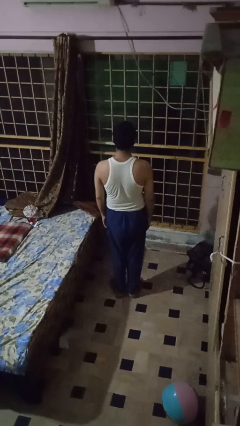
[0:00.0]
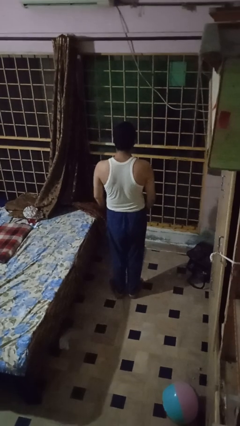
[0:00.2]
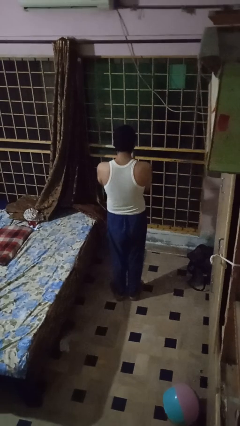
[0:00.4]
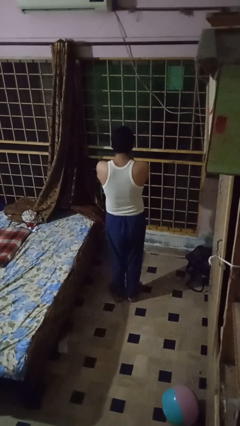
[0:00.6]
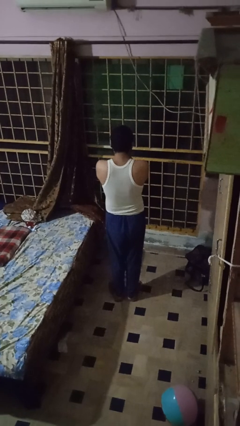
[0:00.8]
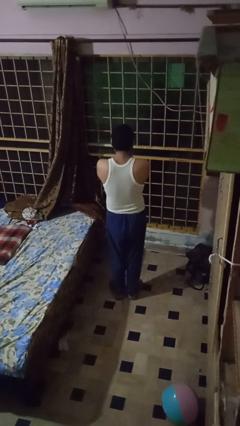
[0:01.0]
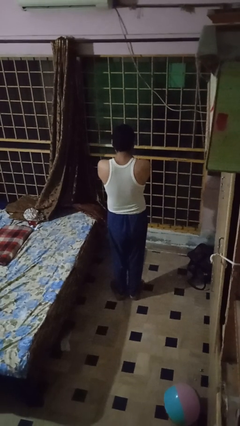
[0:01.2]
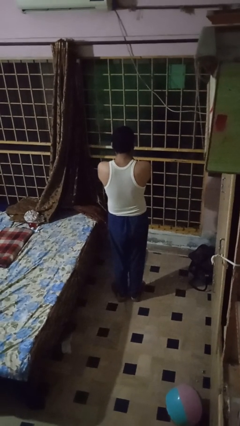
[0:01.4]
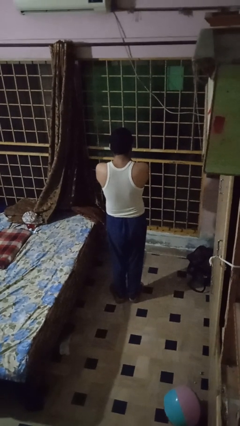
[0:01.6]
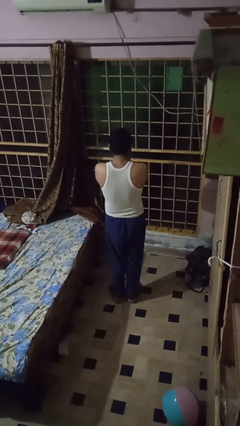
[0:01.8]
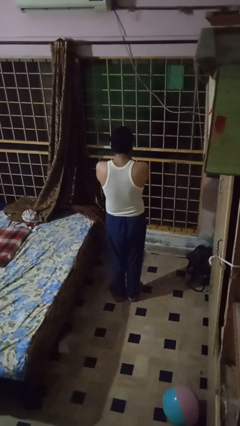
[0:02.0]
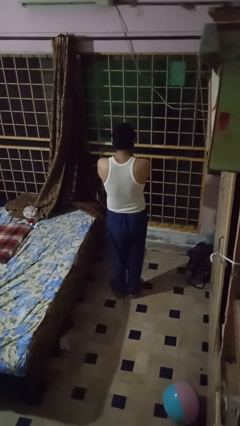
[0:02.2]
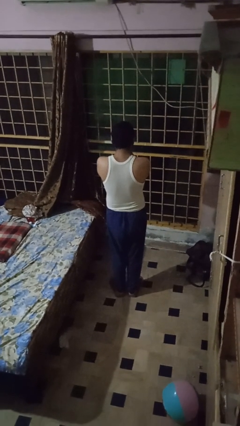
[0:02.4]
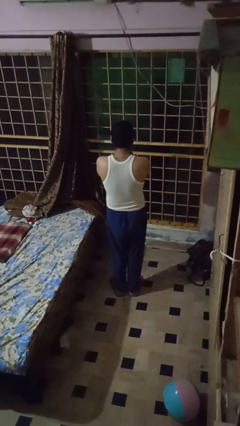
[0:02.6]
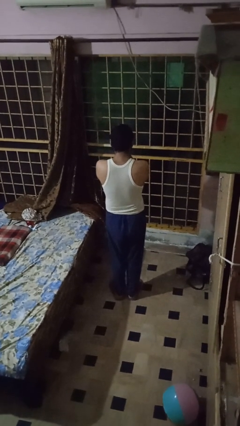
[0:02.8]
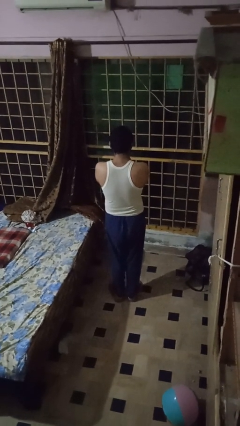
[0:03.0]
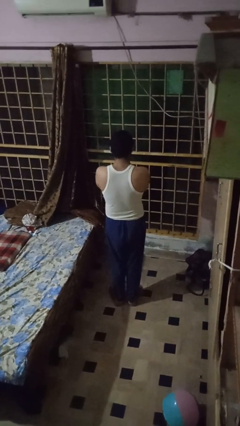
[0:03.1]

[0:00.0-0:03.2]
person covers face with hands

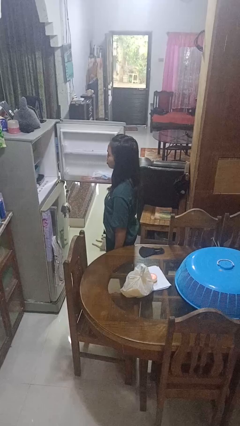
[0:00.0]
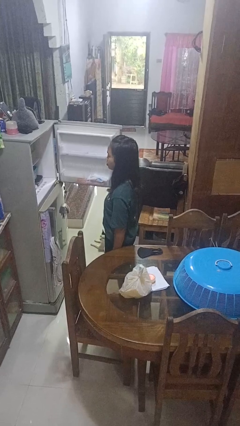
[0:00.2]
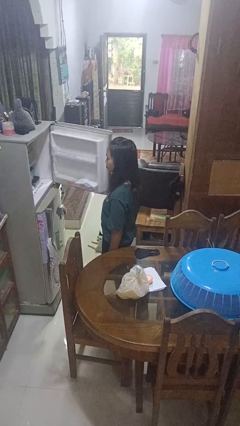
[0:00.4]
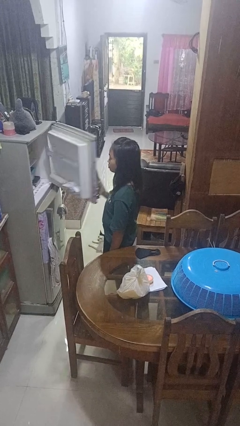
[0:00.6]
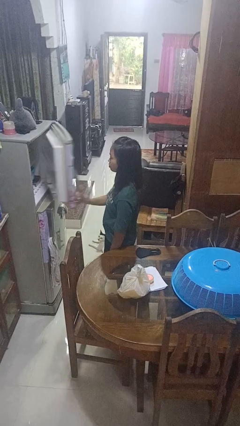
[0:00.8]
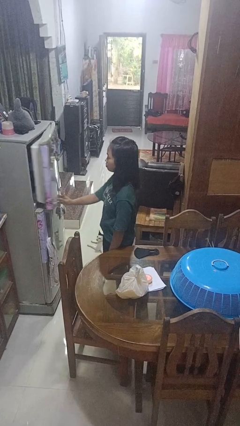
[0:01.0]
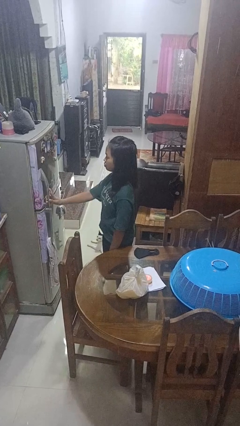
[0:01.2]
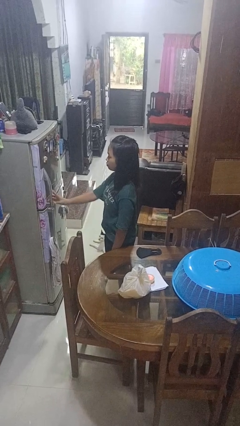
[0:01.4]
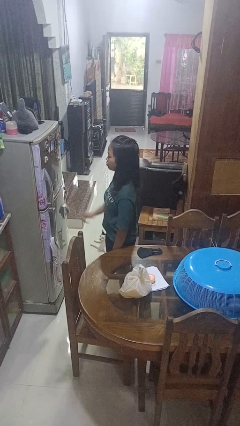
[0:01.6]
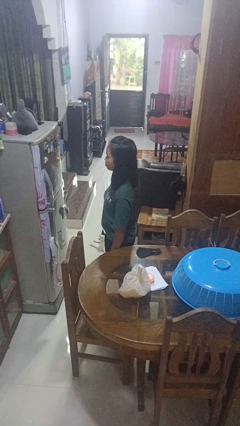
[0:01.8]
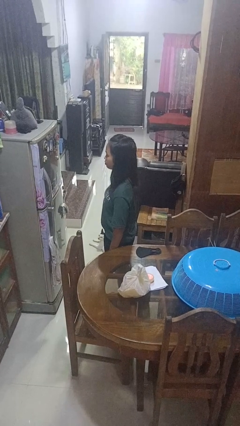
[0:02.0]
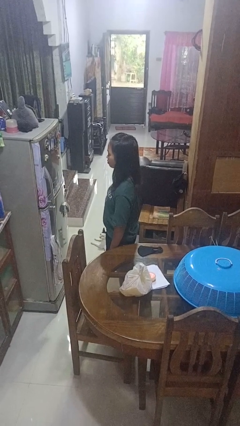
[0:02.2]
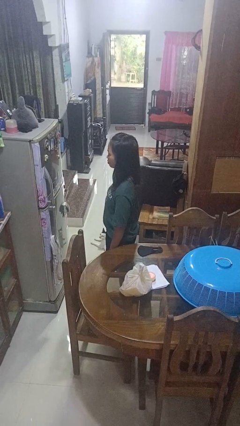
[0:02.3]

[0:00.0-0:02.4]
person closes refrigerator

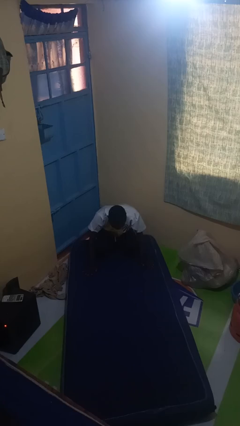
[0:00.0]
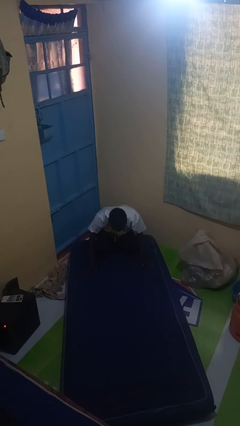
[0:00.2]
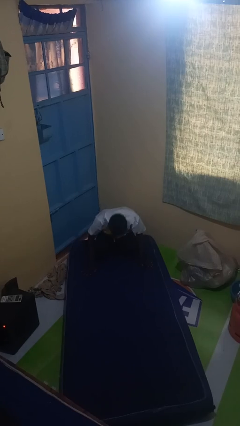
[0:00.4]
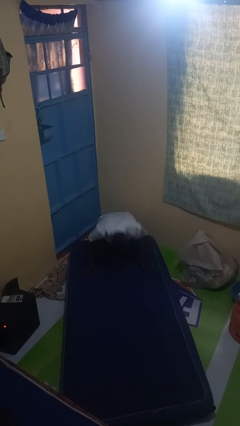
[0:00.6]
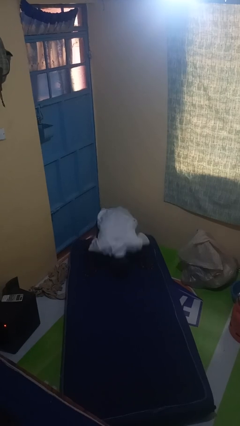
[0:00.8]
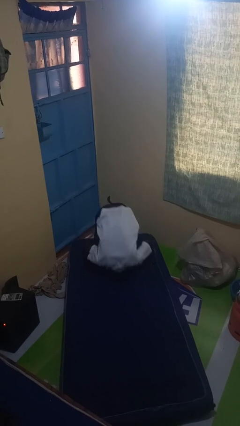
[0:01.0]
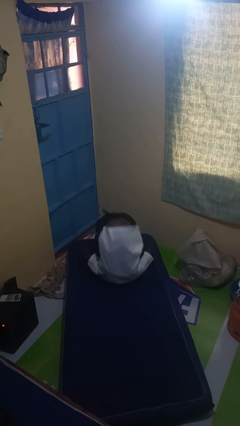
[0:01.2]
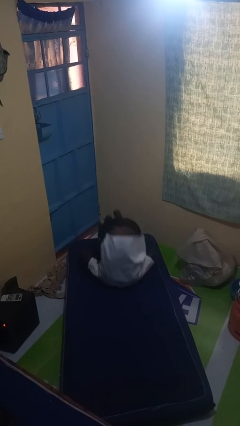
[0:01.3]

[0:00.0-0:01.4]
person somersaults

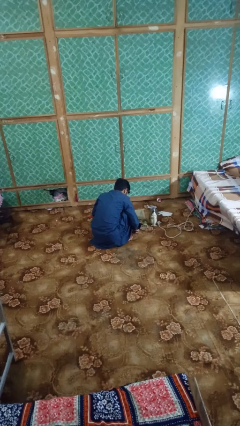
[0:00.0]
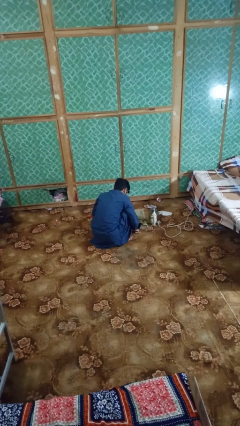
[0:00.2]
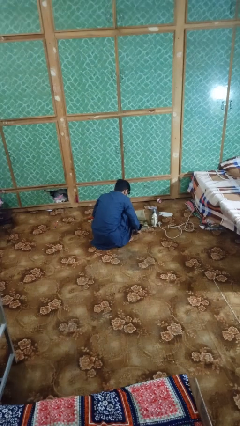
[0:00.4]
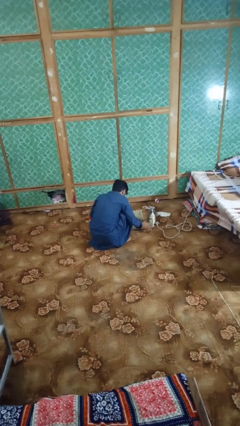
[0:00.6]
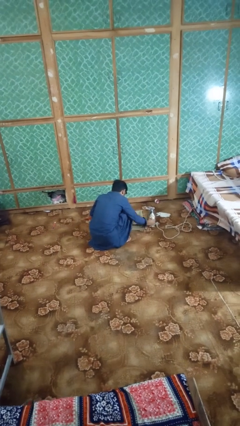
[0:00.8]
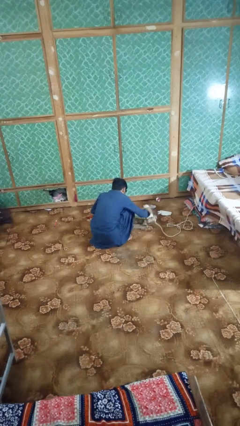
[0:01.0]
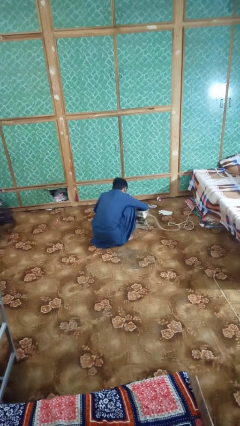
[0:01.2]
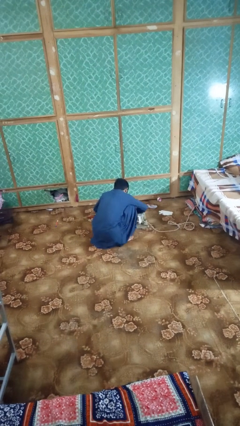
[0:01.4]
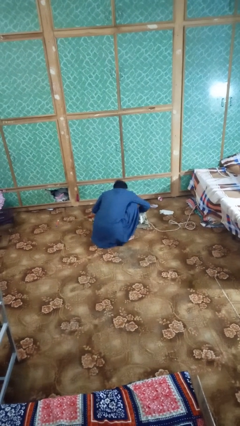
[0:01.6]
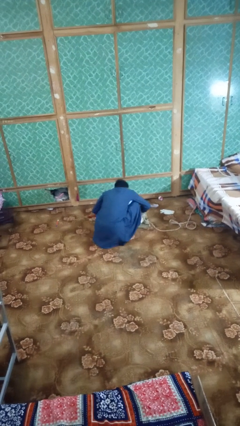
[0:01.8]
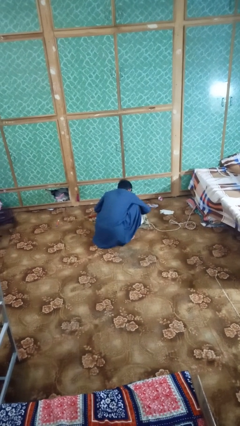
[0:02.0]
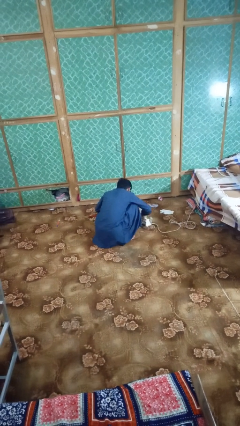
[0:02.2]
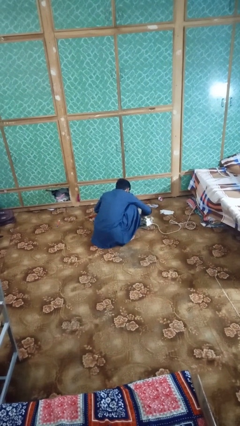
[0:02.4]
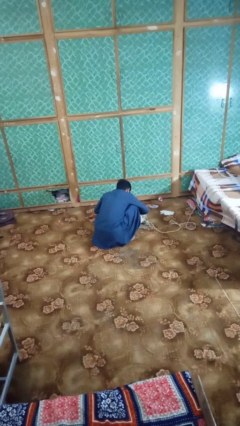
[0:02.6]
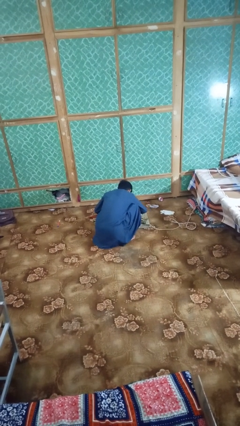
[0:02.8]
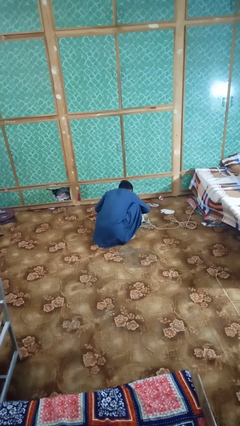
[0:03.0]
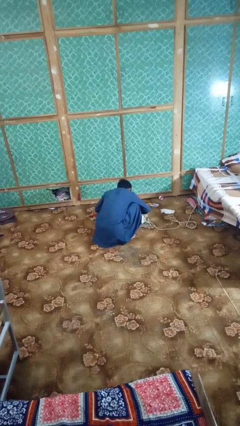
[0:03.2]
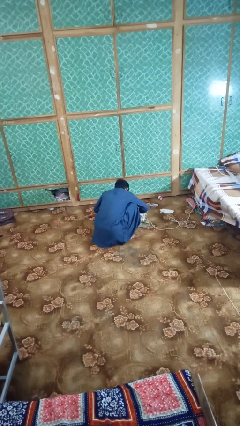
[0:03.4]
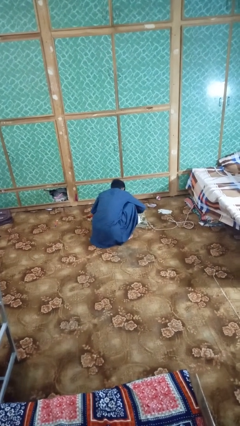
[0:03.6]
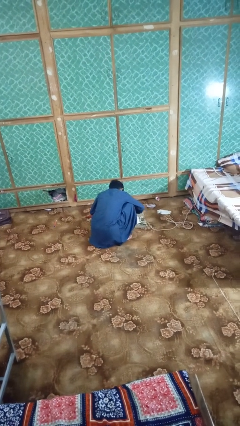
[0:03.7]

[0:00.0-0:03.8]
person irons clothes

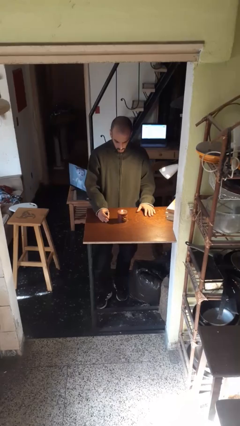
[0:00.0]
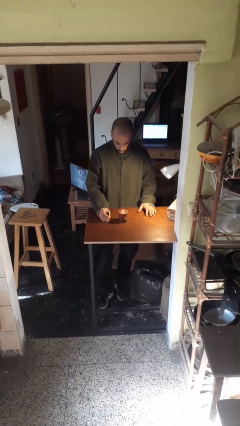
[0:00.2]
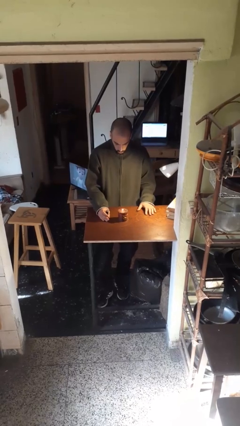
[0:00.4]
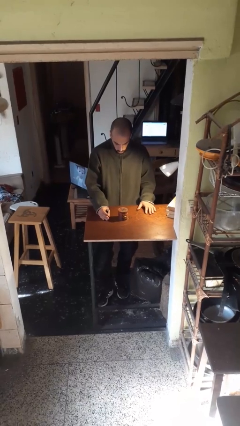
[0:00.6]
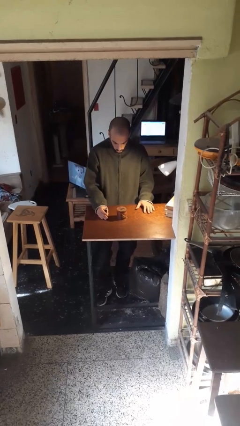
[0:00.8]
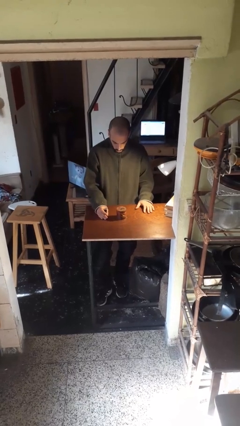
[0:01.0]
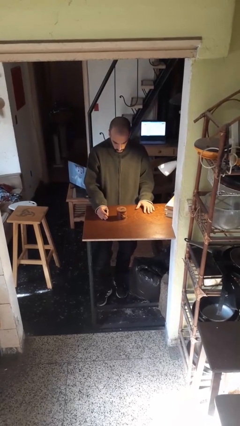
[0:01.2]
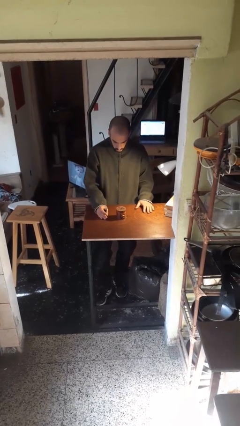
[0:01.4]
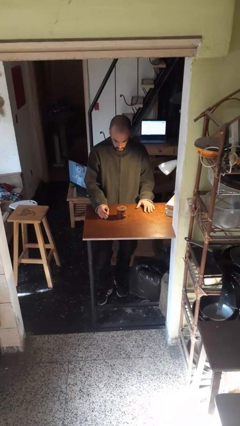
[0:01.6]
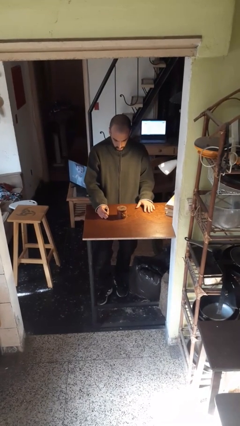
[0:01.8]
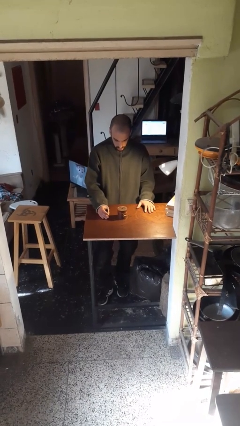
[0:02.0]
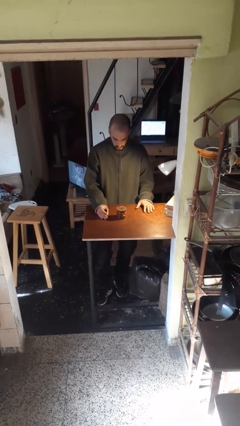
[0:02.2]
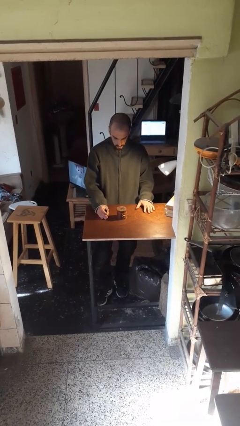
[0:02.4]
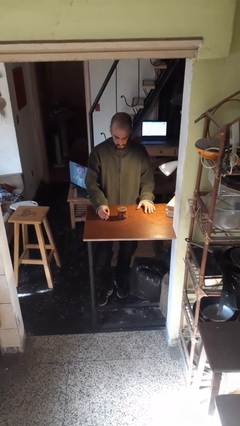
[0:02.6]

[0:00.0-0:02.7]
person extinguishes candle

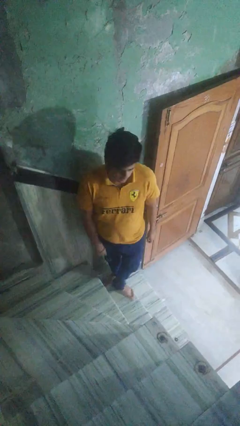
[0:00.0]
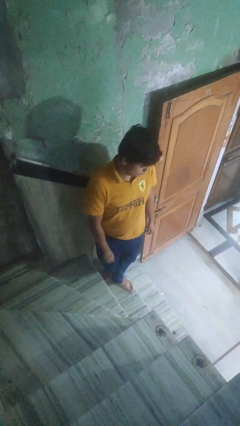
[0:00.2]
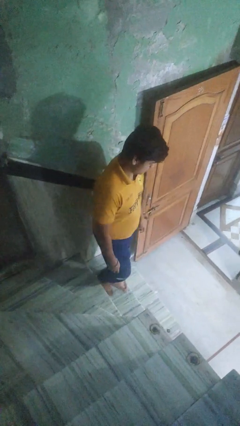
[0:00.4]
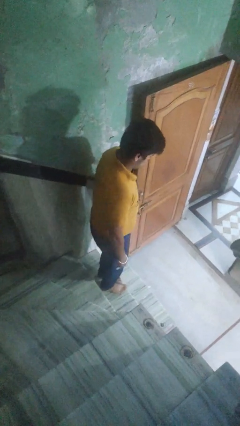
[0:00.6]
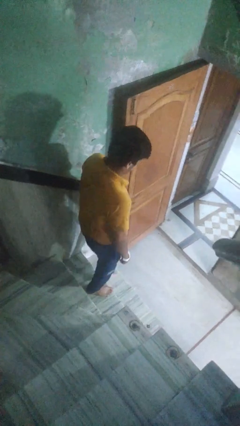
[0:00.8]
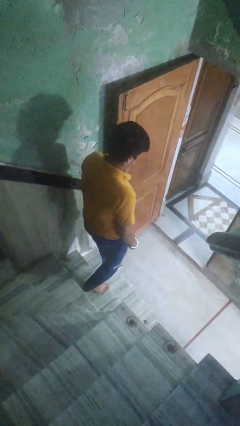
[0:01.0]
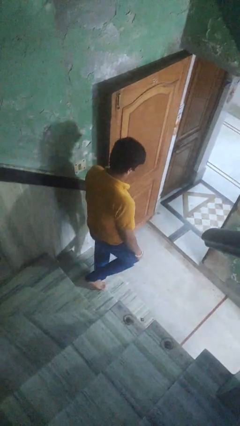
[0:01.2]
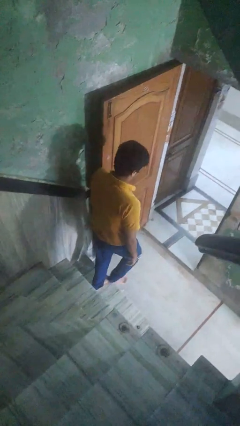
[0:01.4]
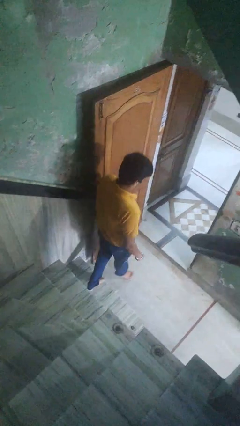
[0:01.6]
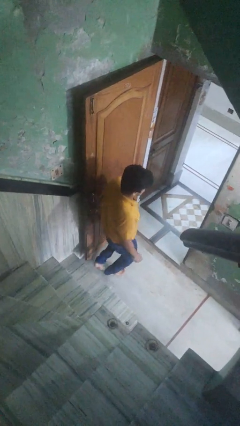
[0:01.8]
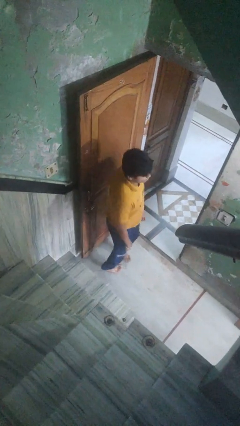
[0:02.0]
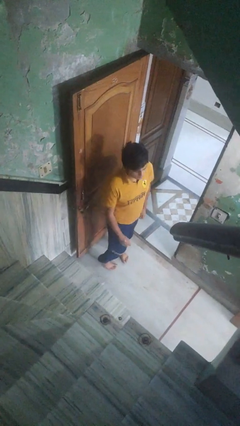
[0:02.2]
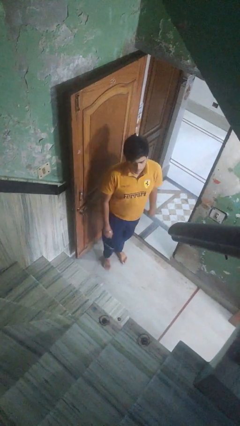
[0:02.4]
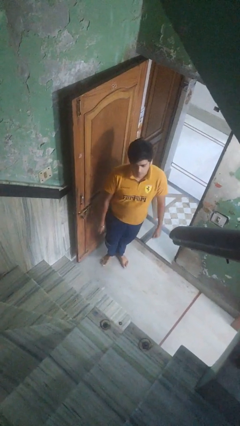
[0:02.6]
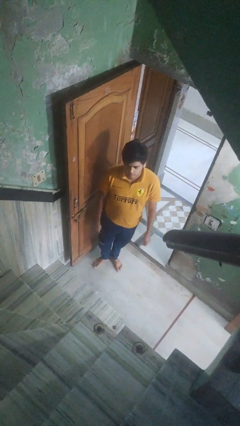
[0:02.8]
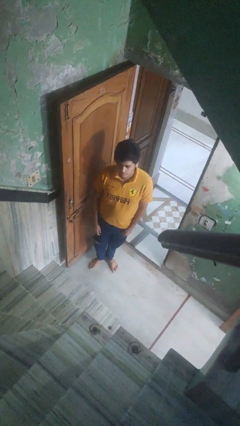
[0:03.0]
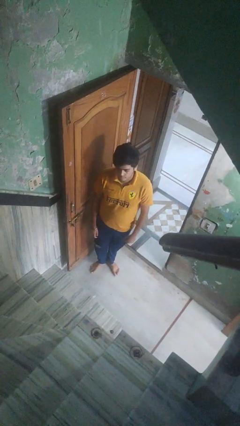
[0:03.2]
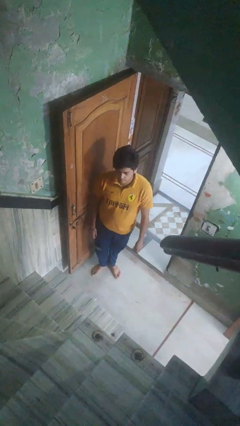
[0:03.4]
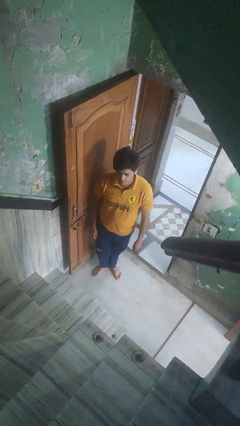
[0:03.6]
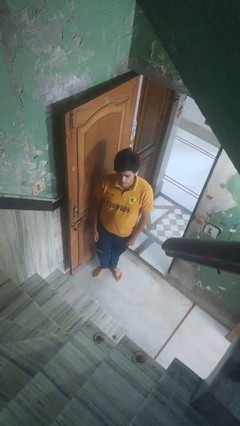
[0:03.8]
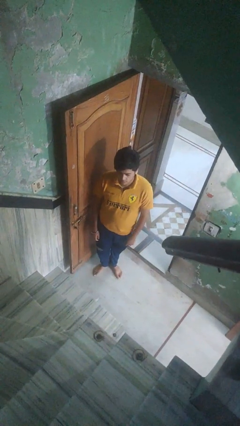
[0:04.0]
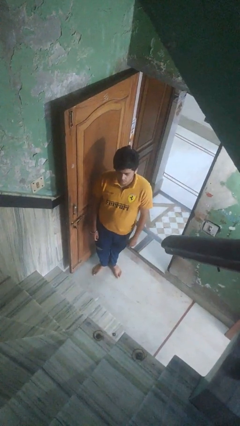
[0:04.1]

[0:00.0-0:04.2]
person climbs down stairs

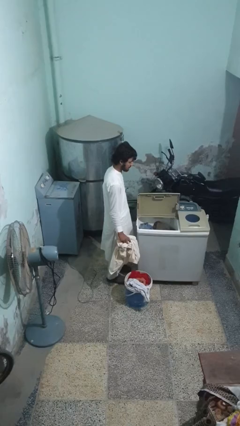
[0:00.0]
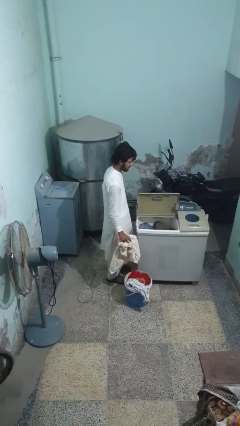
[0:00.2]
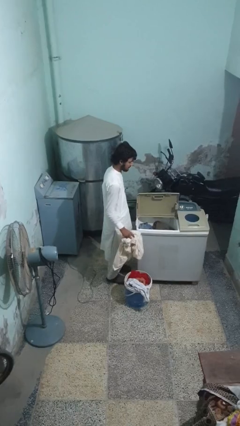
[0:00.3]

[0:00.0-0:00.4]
person loads clotheswasher
